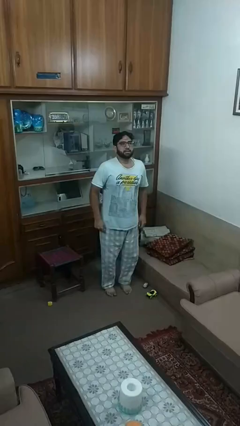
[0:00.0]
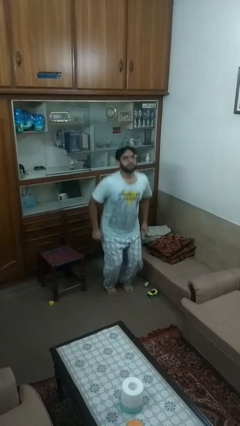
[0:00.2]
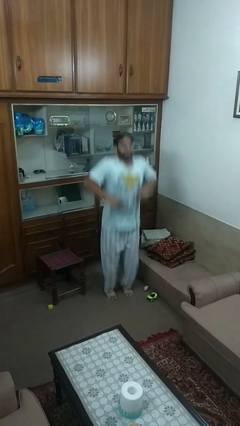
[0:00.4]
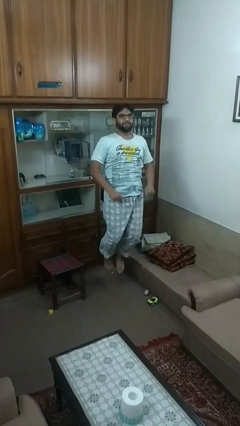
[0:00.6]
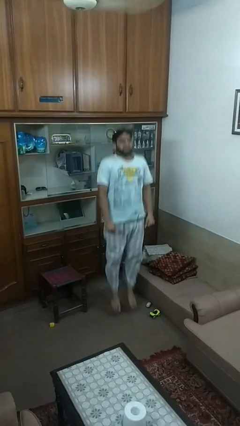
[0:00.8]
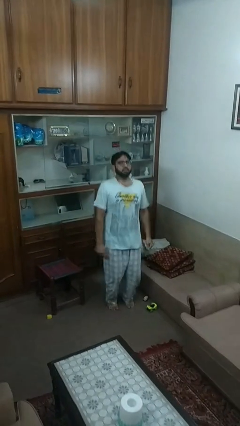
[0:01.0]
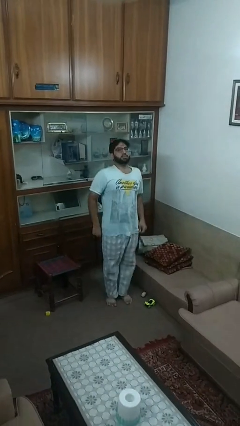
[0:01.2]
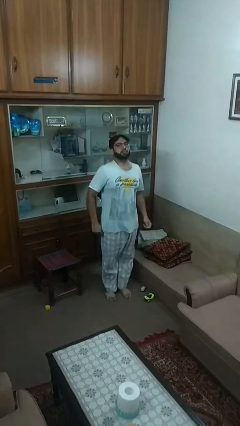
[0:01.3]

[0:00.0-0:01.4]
person jumps

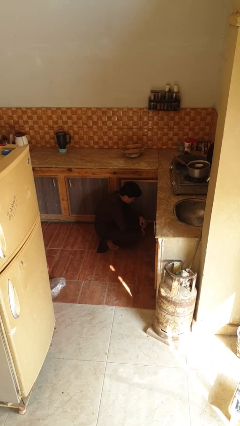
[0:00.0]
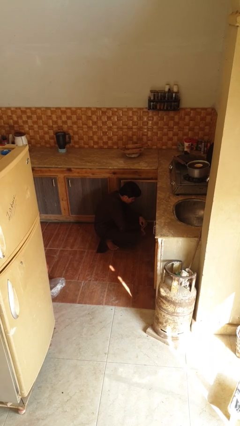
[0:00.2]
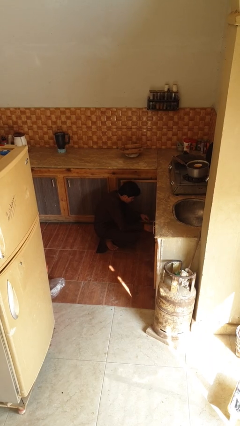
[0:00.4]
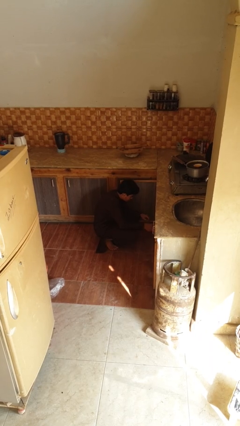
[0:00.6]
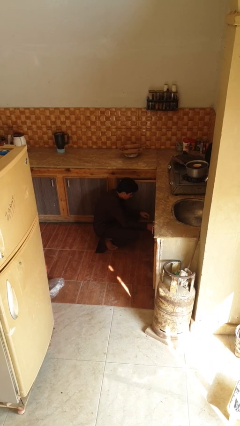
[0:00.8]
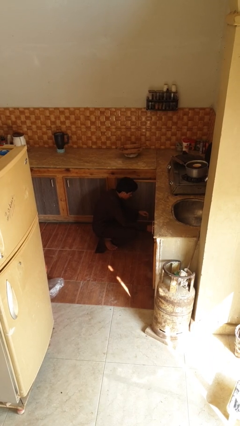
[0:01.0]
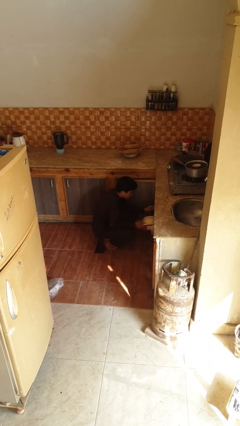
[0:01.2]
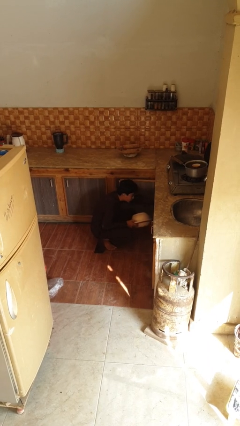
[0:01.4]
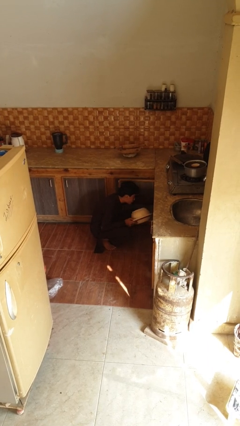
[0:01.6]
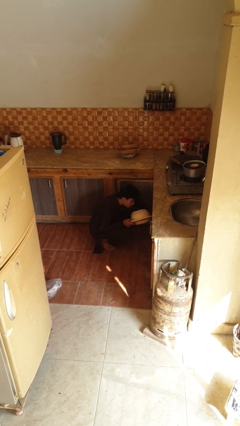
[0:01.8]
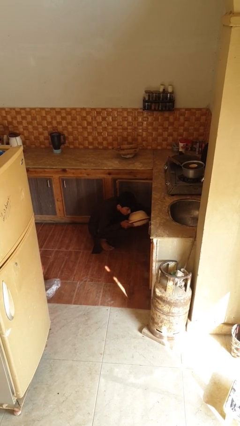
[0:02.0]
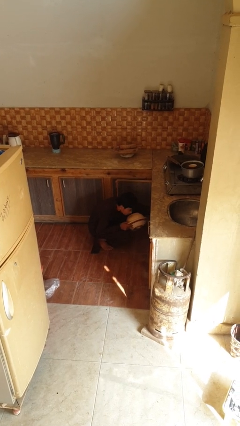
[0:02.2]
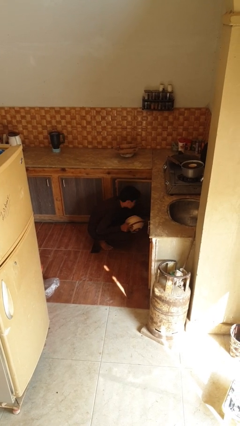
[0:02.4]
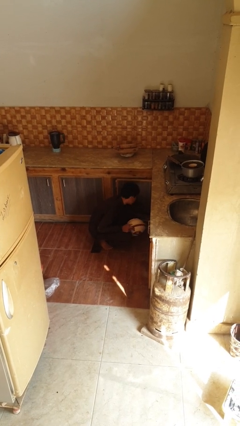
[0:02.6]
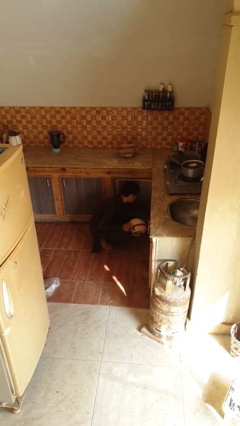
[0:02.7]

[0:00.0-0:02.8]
person searches in kitchen drawer

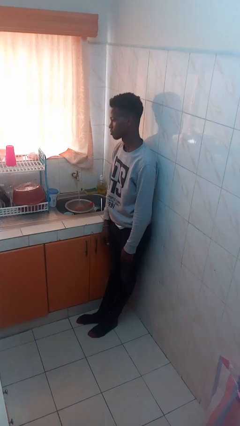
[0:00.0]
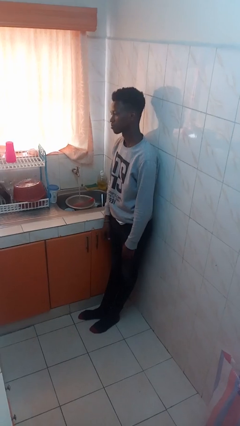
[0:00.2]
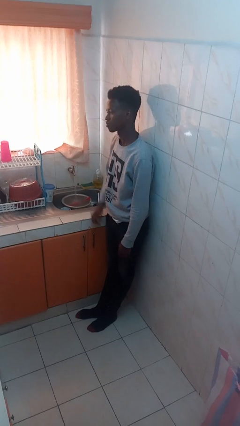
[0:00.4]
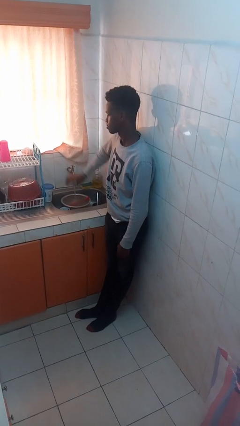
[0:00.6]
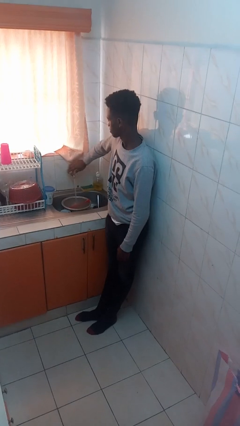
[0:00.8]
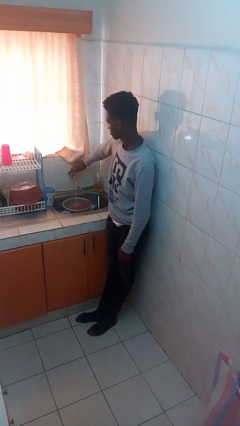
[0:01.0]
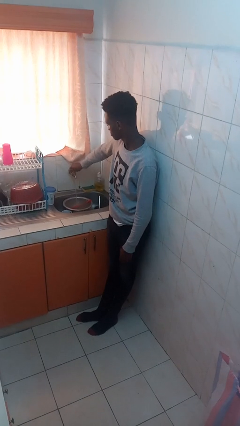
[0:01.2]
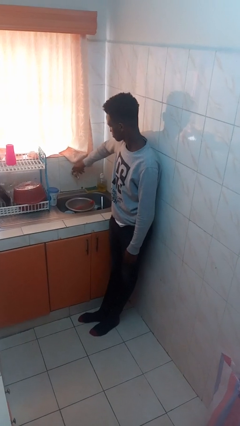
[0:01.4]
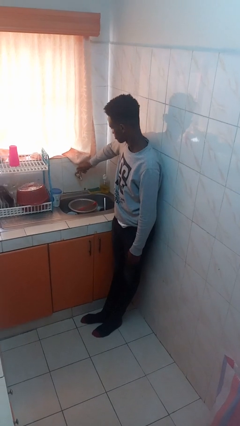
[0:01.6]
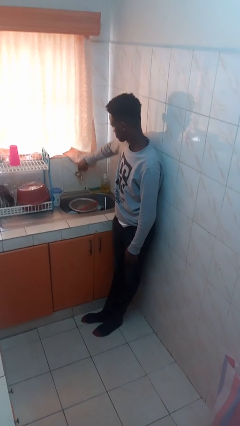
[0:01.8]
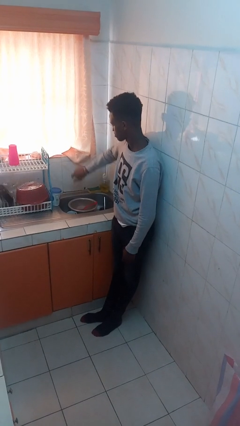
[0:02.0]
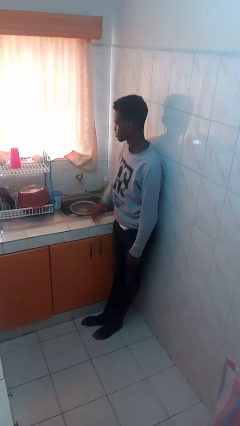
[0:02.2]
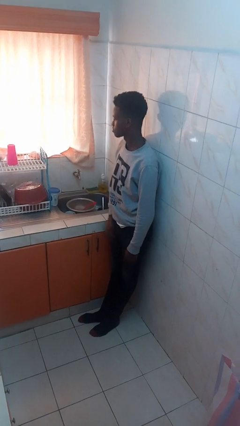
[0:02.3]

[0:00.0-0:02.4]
person turns off faucet

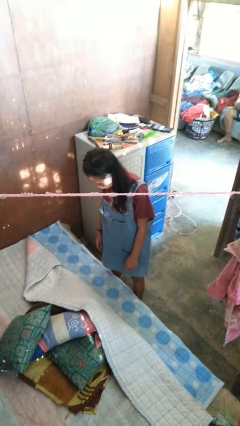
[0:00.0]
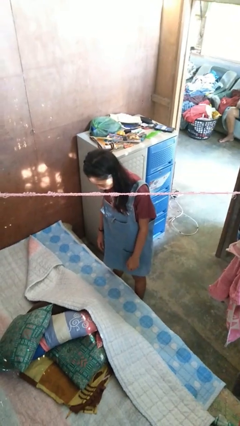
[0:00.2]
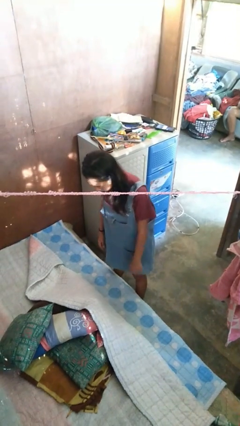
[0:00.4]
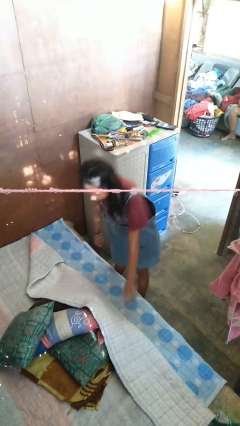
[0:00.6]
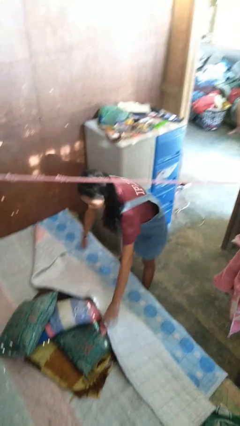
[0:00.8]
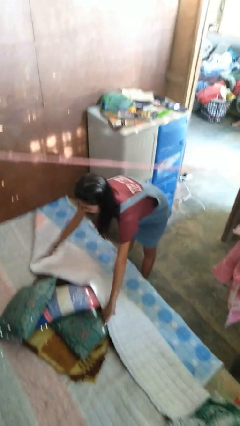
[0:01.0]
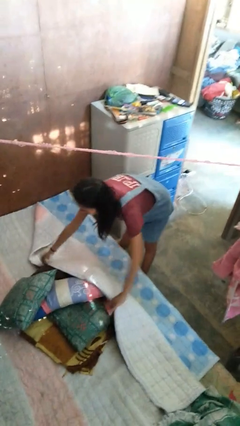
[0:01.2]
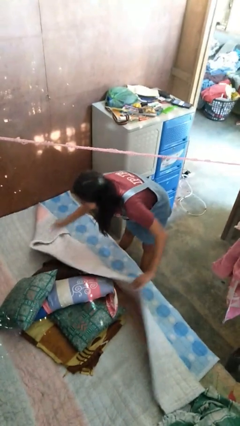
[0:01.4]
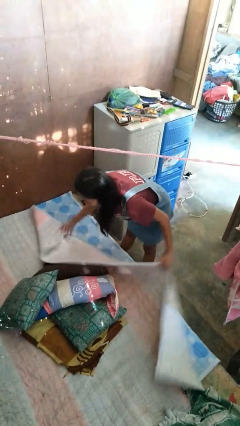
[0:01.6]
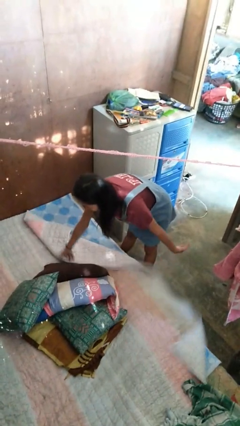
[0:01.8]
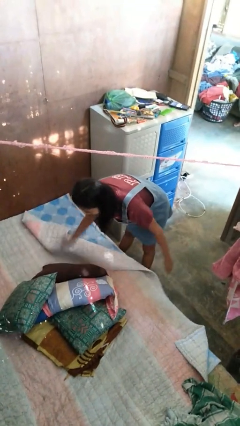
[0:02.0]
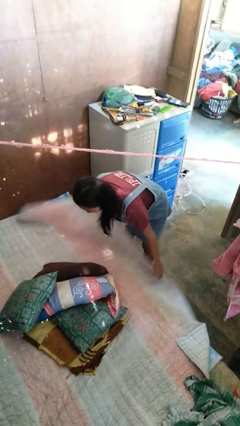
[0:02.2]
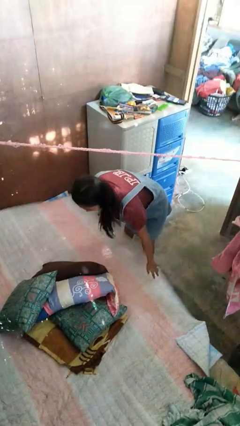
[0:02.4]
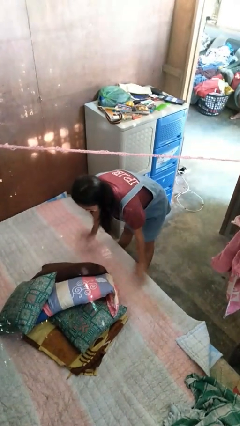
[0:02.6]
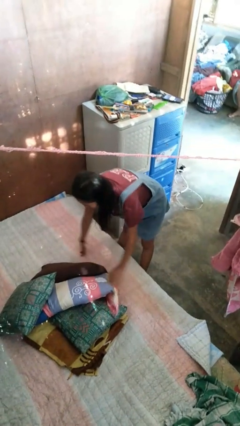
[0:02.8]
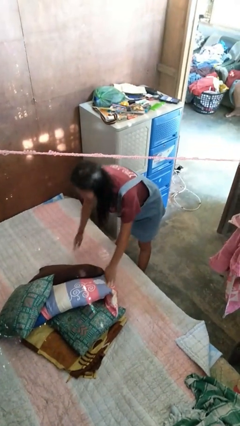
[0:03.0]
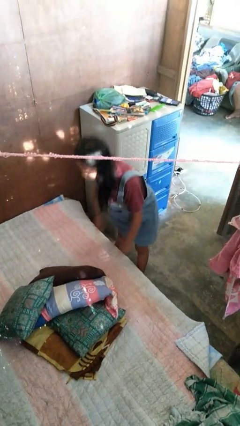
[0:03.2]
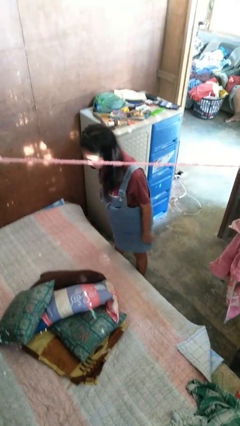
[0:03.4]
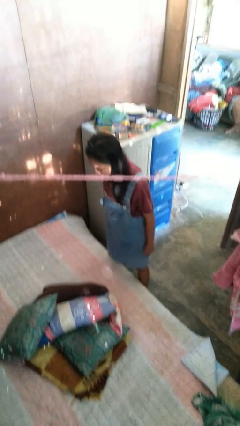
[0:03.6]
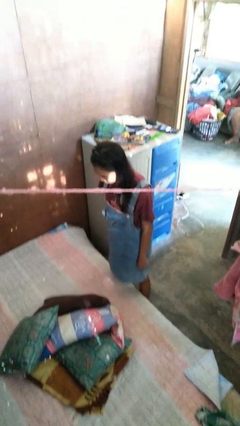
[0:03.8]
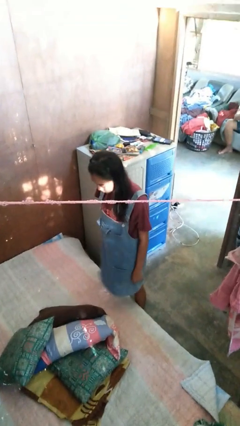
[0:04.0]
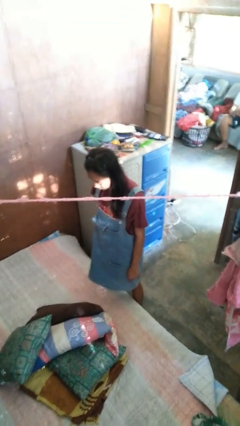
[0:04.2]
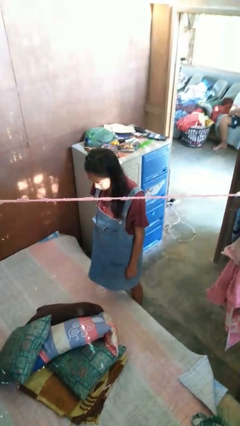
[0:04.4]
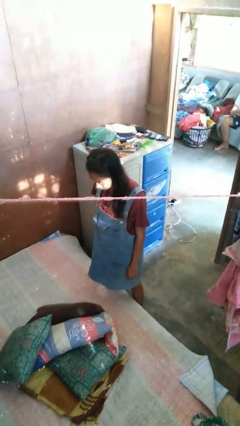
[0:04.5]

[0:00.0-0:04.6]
person makes bed

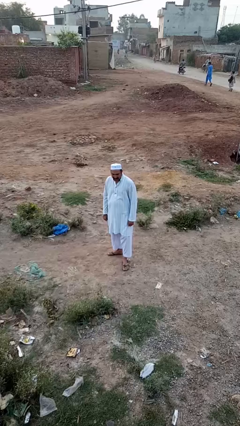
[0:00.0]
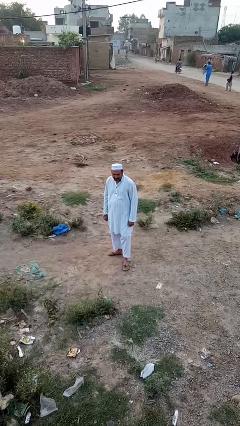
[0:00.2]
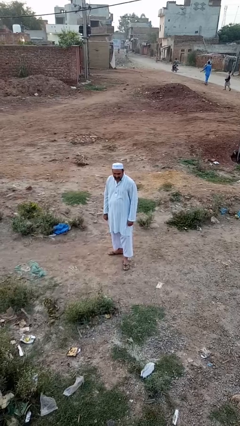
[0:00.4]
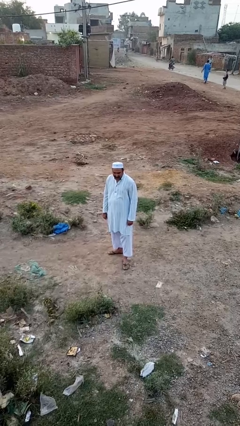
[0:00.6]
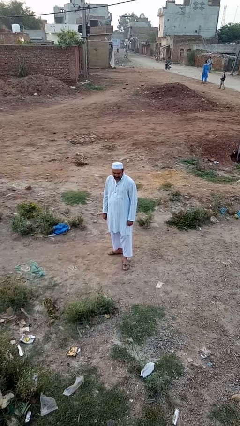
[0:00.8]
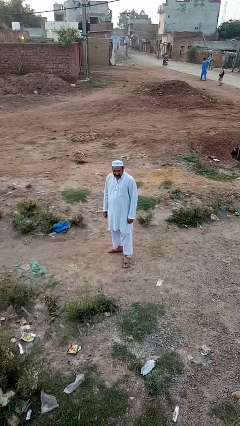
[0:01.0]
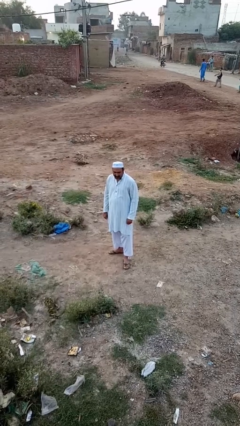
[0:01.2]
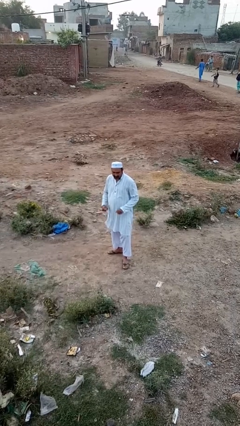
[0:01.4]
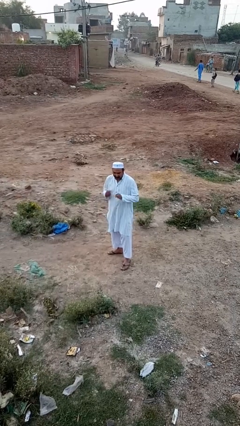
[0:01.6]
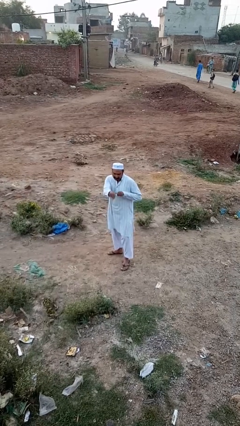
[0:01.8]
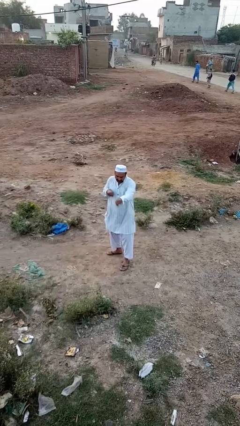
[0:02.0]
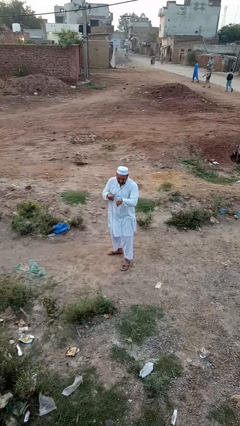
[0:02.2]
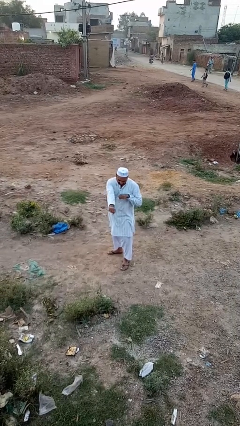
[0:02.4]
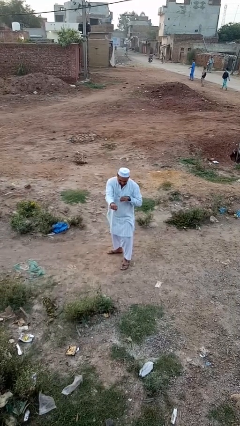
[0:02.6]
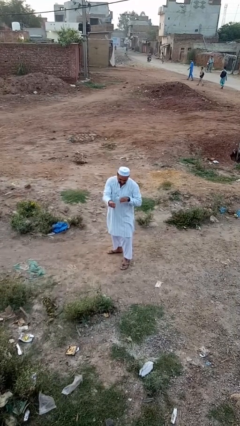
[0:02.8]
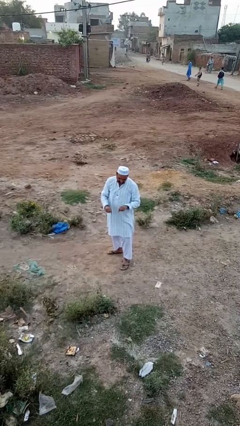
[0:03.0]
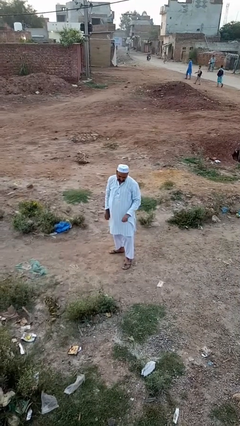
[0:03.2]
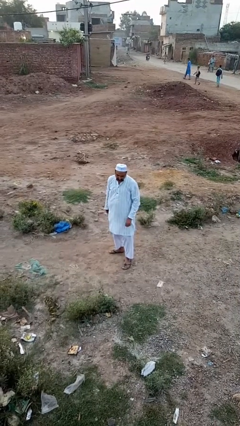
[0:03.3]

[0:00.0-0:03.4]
person punches

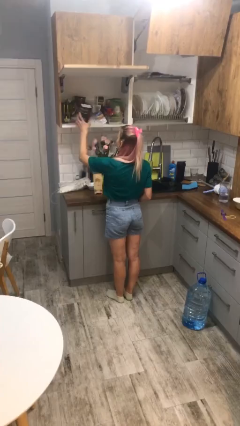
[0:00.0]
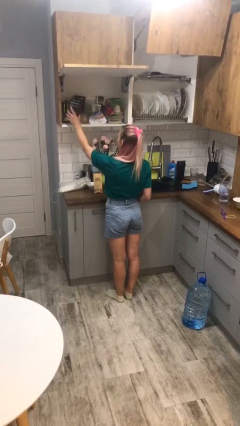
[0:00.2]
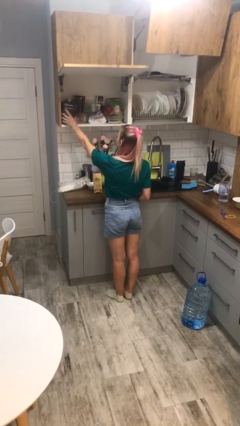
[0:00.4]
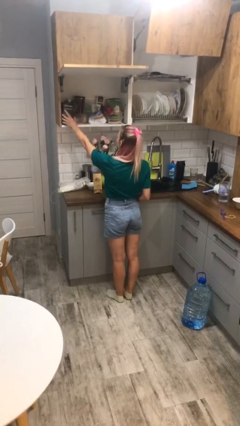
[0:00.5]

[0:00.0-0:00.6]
person puts down object into cabinet

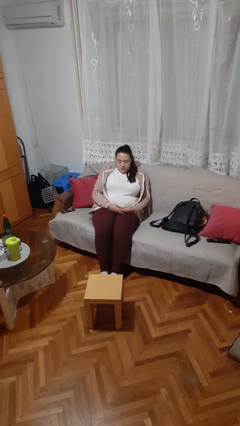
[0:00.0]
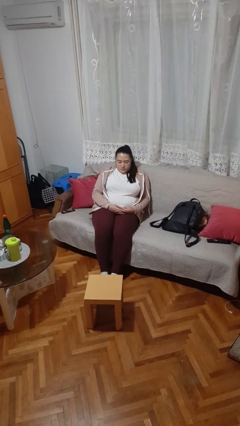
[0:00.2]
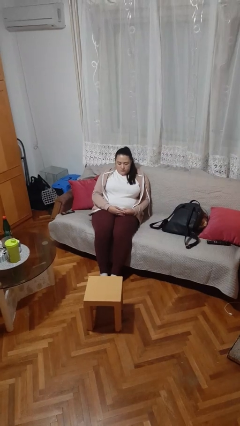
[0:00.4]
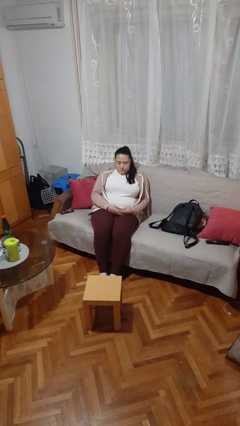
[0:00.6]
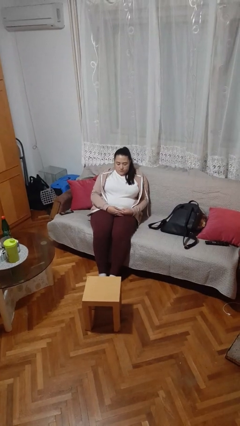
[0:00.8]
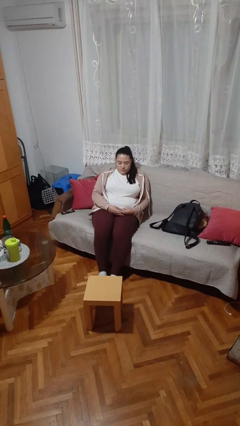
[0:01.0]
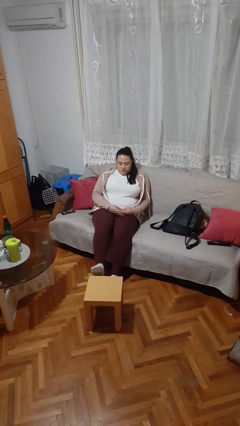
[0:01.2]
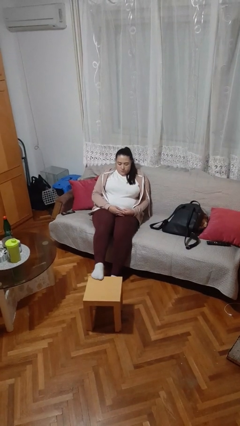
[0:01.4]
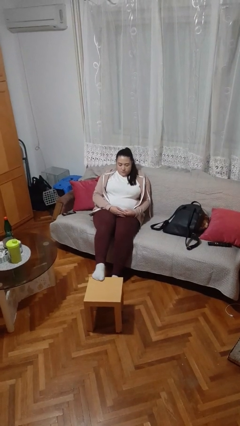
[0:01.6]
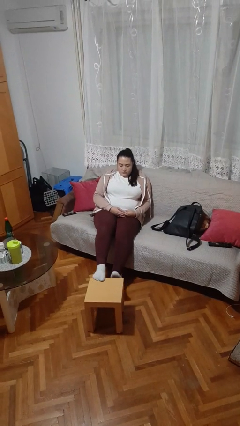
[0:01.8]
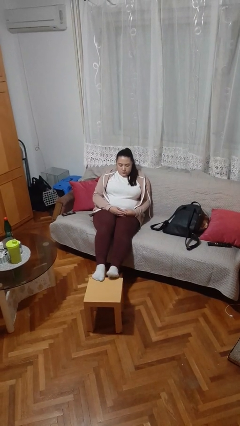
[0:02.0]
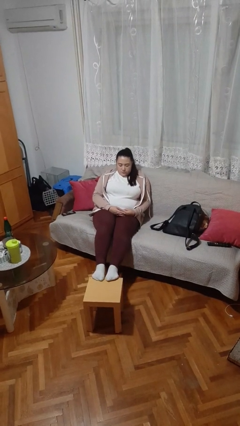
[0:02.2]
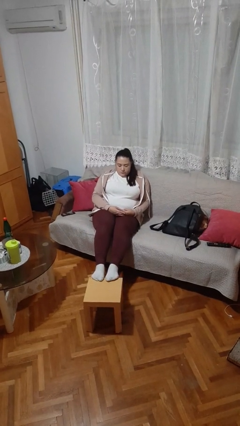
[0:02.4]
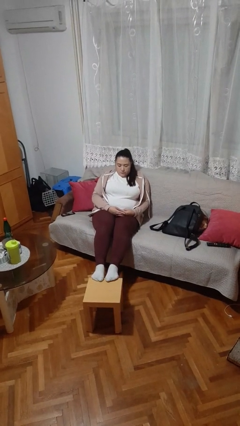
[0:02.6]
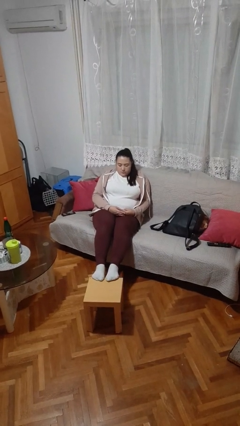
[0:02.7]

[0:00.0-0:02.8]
person puts feet up
